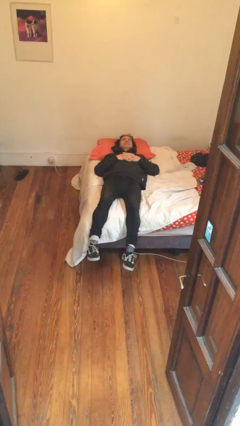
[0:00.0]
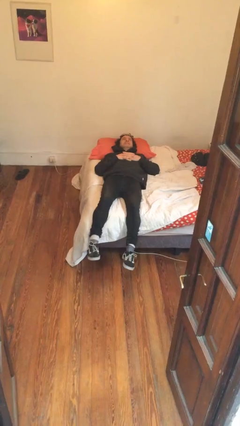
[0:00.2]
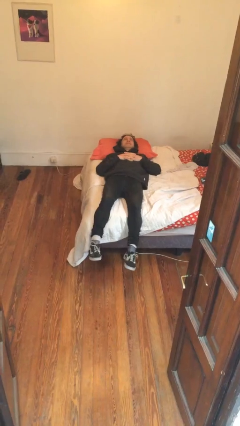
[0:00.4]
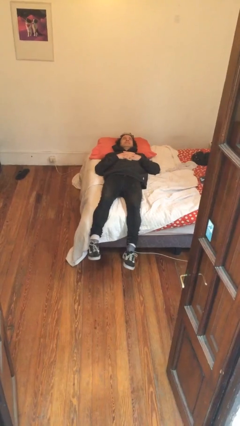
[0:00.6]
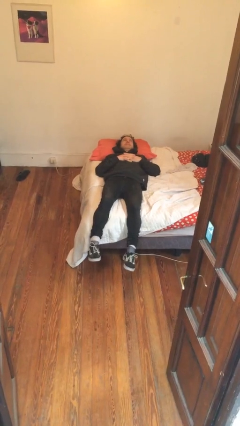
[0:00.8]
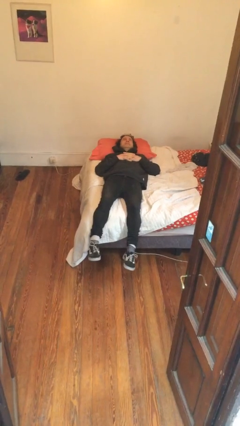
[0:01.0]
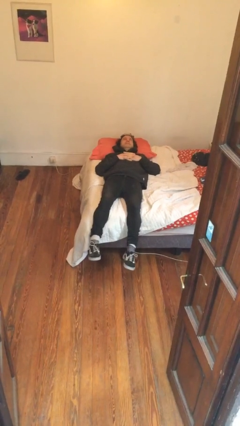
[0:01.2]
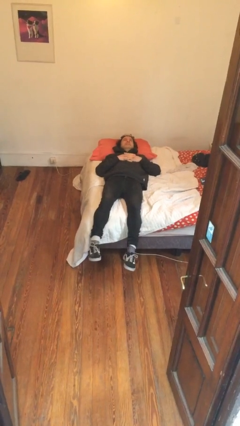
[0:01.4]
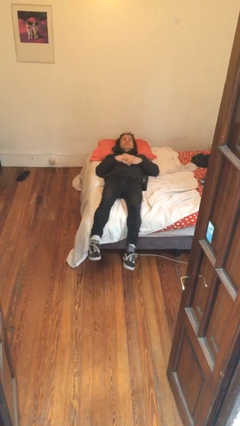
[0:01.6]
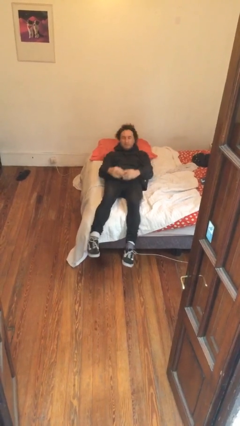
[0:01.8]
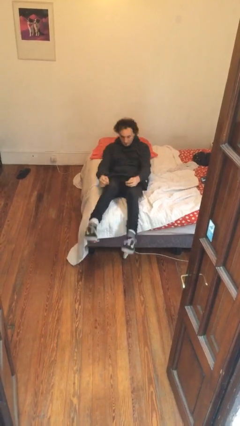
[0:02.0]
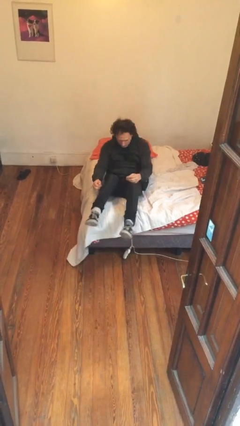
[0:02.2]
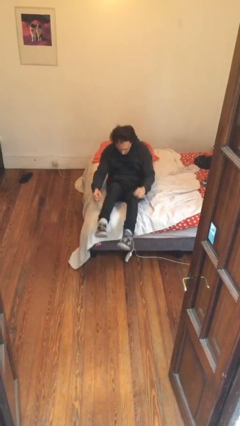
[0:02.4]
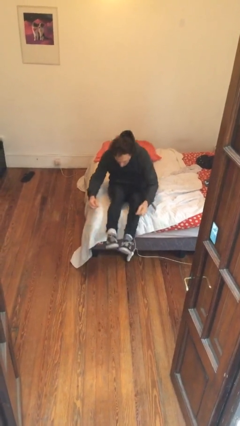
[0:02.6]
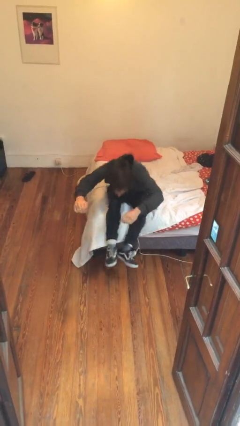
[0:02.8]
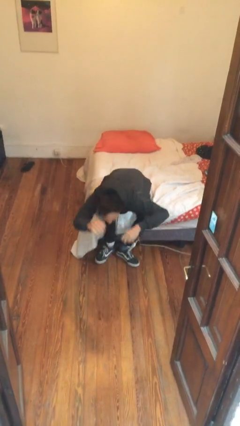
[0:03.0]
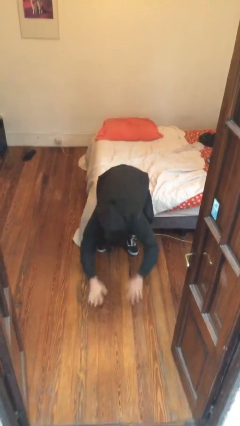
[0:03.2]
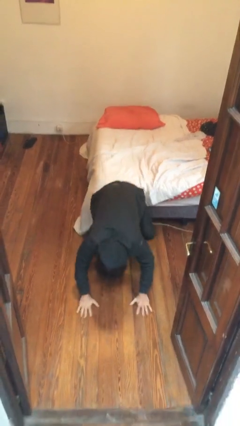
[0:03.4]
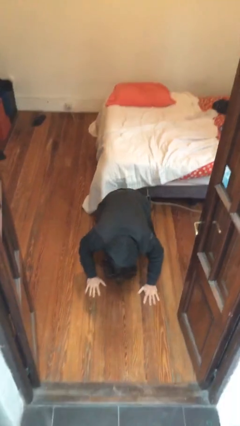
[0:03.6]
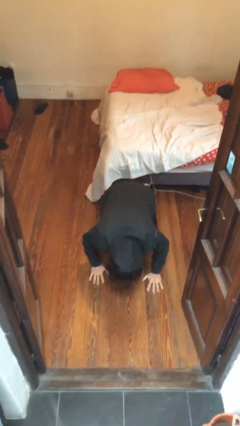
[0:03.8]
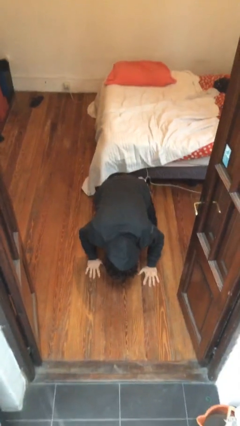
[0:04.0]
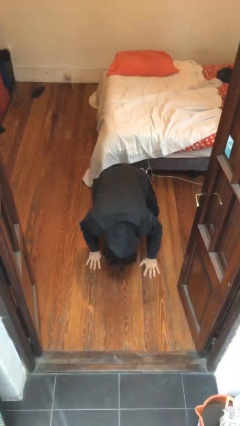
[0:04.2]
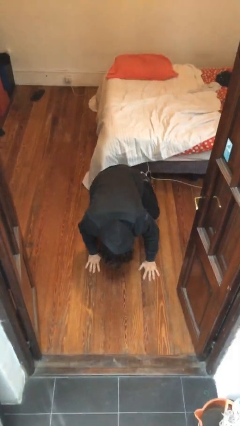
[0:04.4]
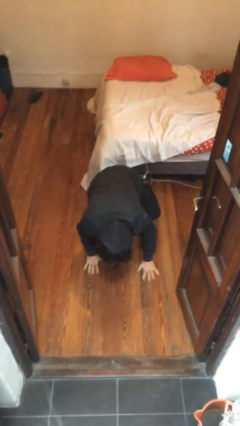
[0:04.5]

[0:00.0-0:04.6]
person falls from bed

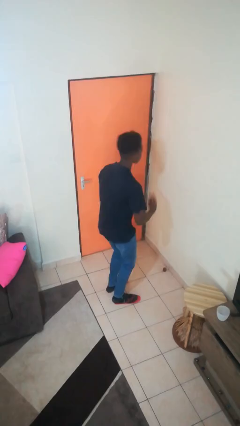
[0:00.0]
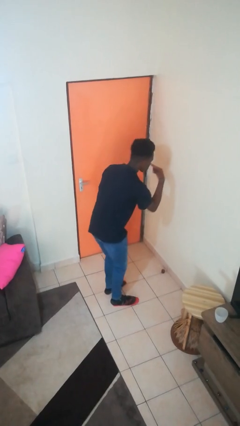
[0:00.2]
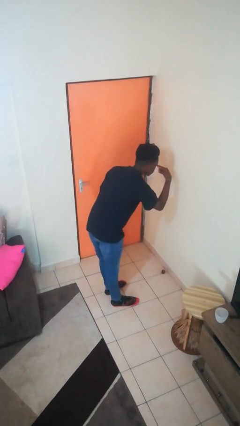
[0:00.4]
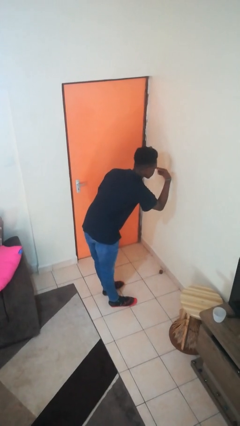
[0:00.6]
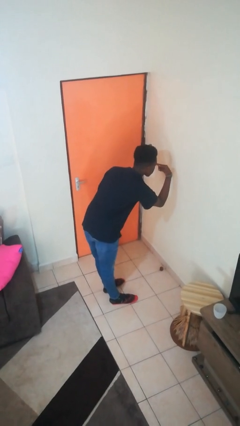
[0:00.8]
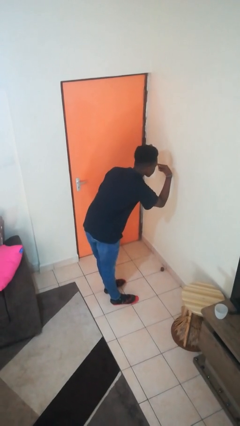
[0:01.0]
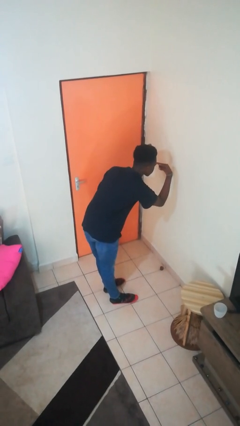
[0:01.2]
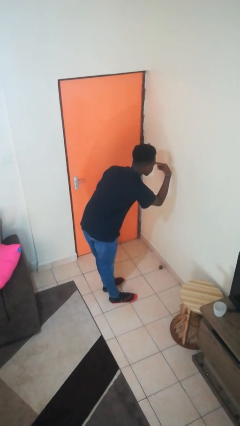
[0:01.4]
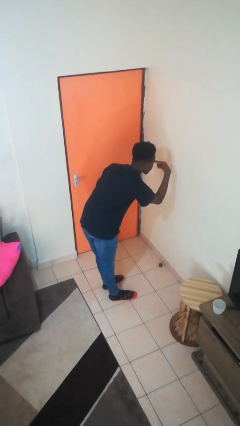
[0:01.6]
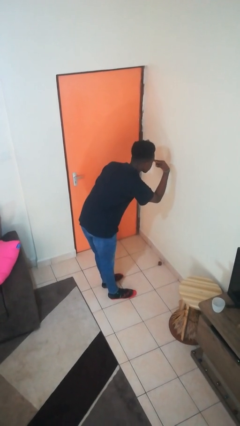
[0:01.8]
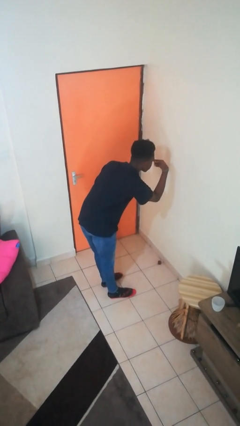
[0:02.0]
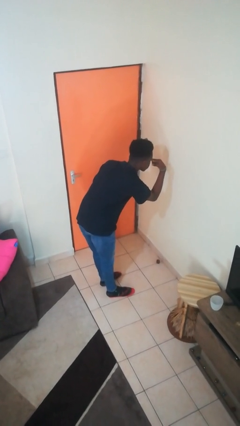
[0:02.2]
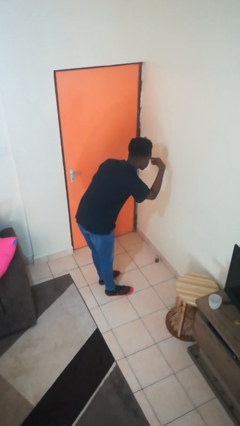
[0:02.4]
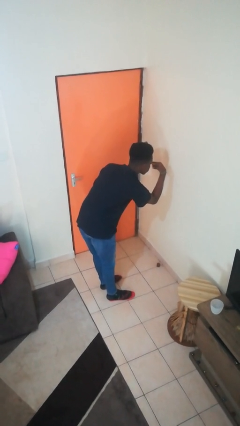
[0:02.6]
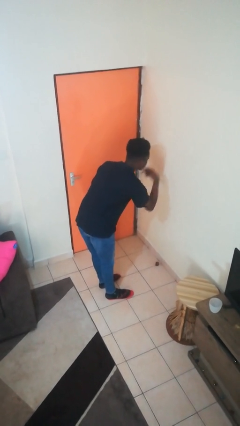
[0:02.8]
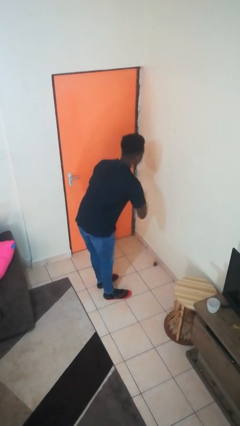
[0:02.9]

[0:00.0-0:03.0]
person gestures watch closely

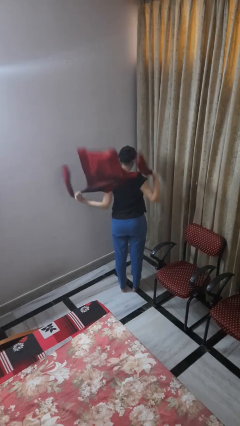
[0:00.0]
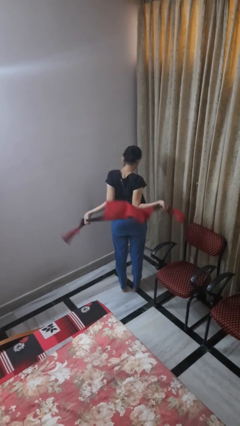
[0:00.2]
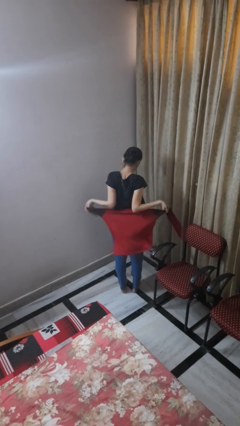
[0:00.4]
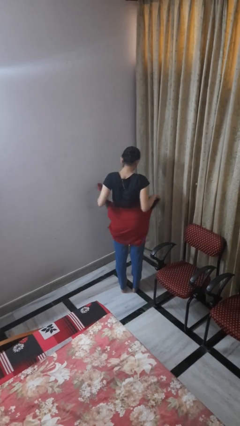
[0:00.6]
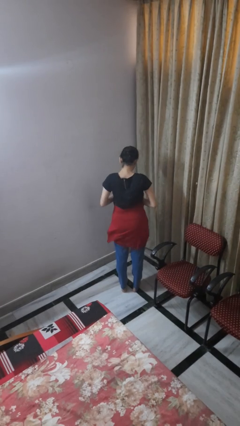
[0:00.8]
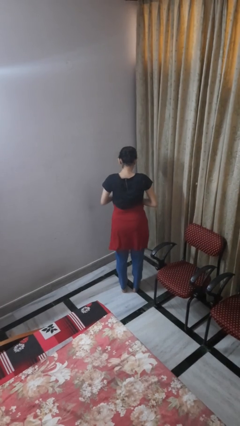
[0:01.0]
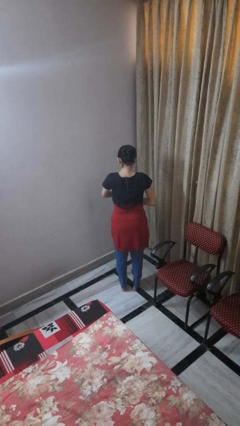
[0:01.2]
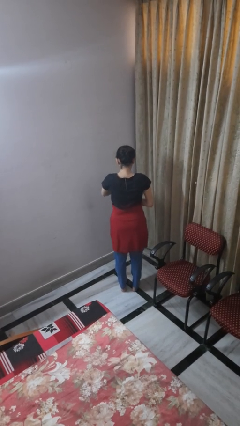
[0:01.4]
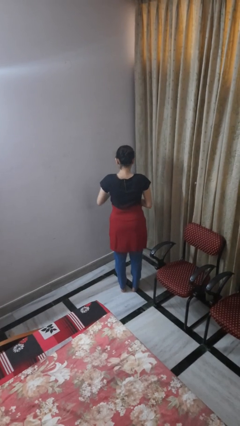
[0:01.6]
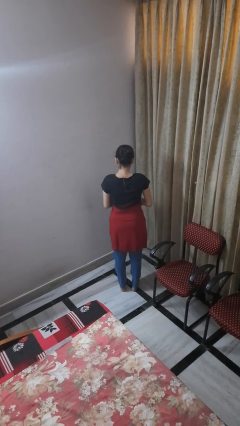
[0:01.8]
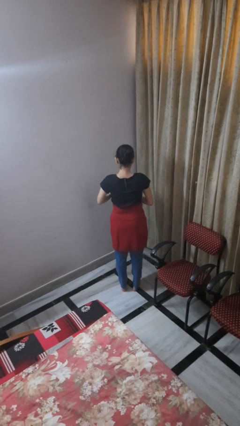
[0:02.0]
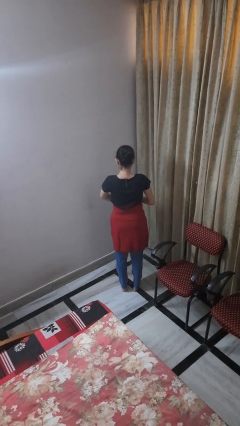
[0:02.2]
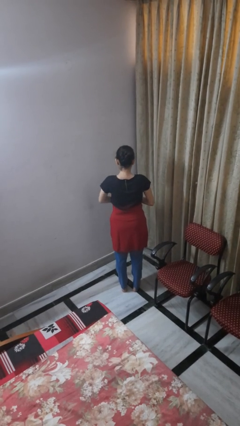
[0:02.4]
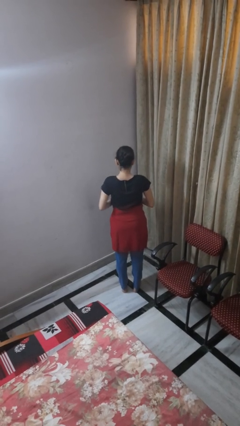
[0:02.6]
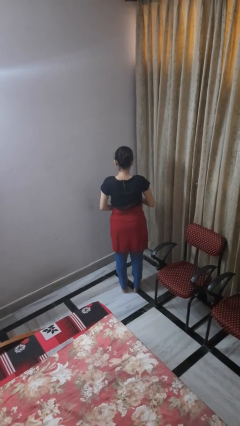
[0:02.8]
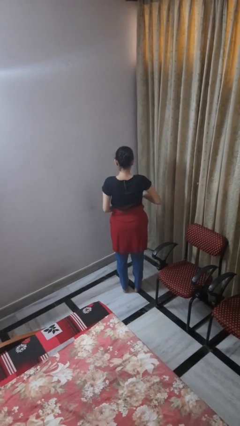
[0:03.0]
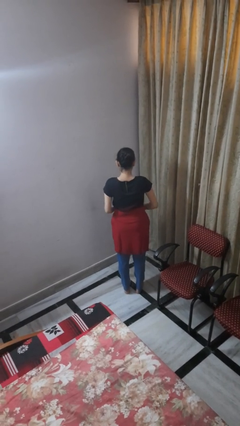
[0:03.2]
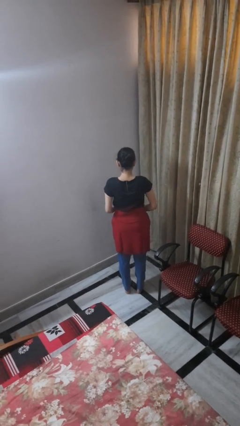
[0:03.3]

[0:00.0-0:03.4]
person ties jacket around waist

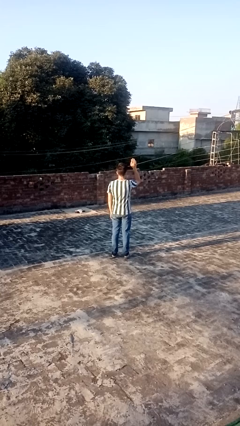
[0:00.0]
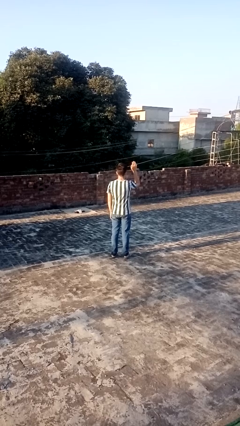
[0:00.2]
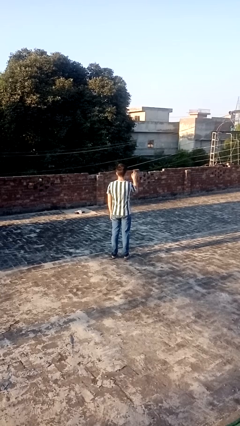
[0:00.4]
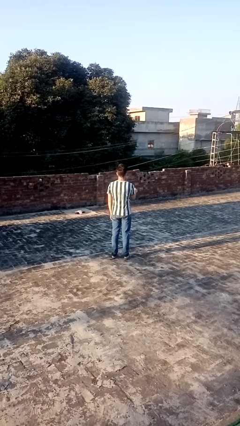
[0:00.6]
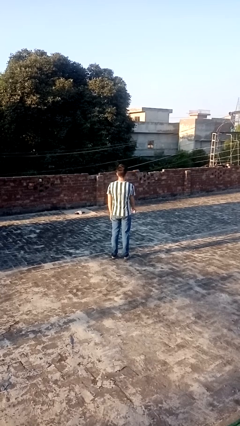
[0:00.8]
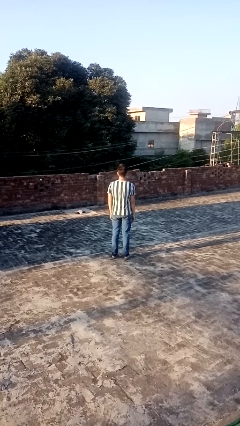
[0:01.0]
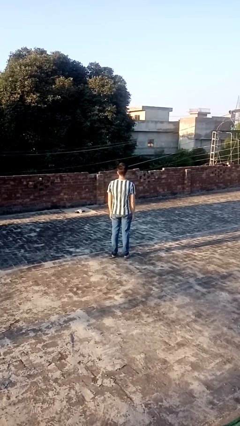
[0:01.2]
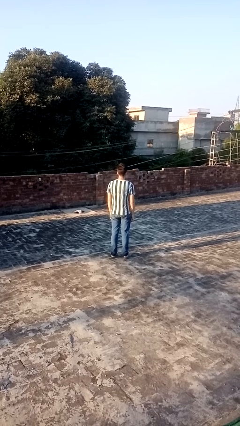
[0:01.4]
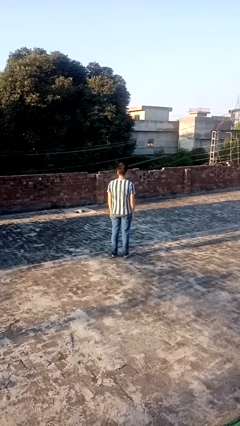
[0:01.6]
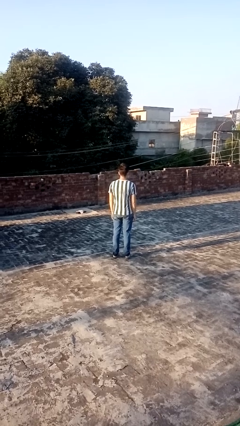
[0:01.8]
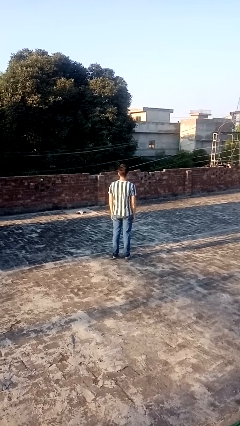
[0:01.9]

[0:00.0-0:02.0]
person gestures lower hand

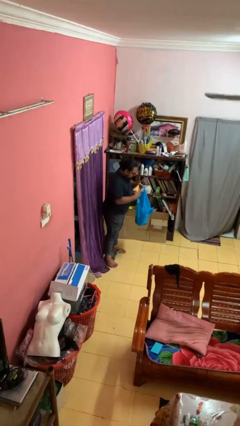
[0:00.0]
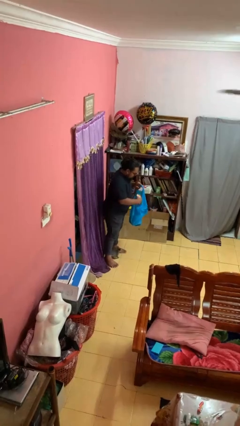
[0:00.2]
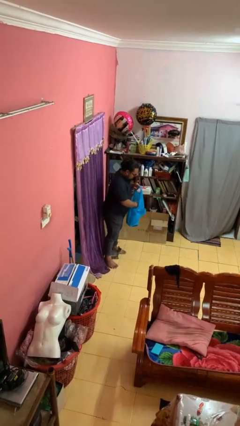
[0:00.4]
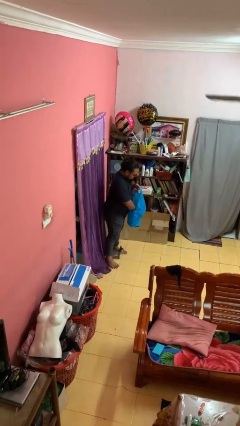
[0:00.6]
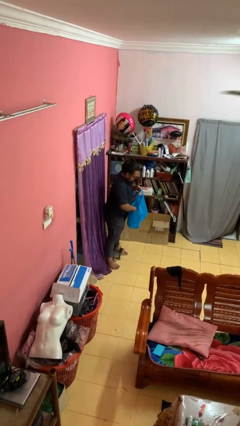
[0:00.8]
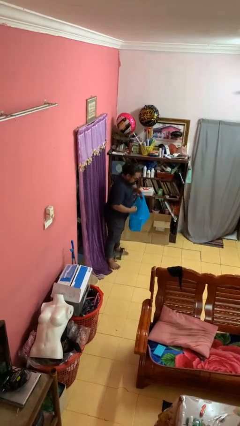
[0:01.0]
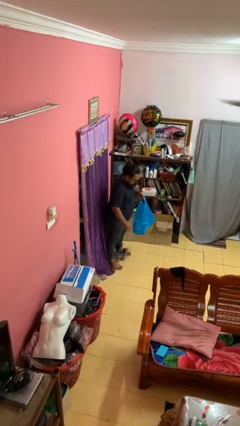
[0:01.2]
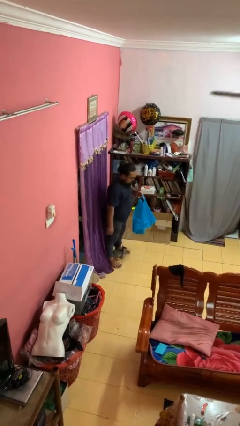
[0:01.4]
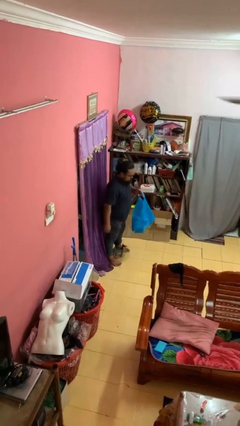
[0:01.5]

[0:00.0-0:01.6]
person puts object into bag

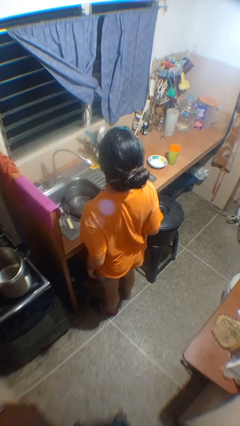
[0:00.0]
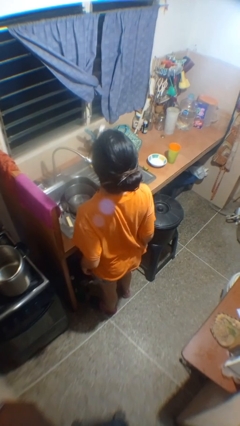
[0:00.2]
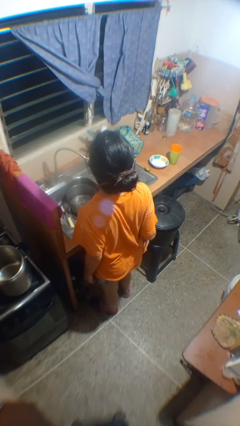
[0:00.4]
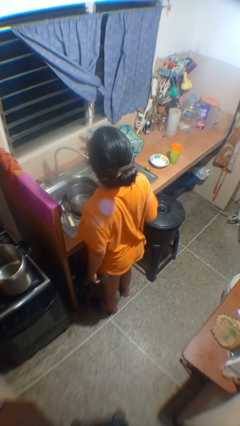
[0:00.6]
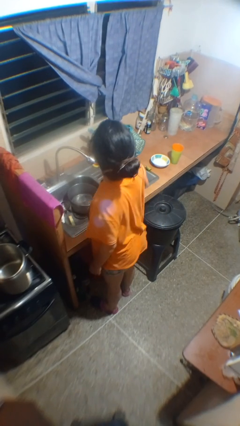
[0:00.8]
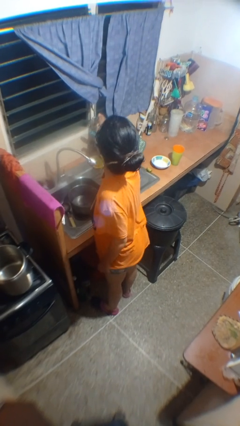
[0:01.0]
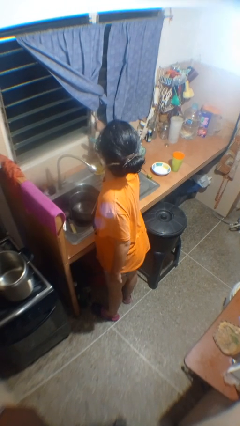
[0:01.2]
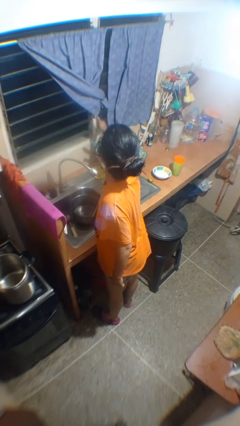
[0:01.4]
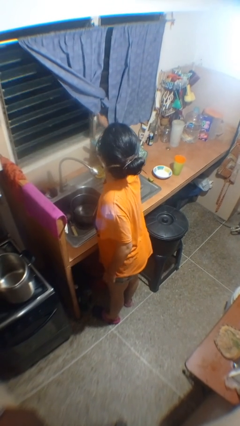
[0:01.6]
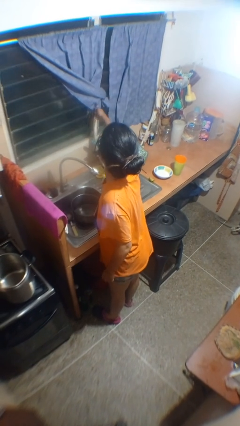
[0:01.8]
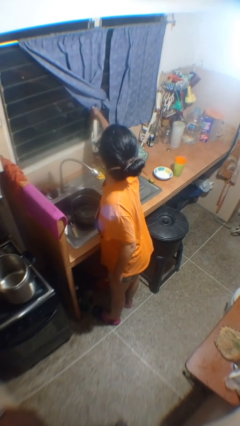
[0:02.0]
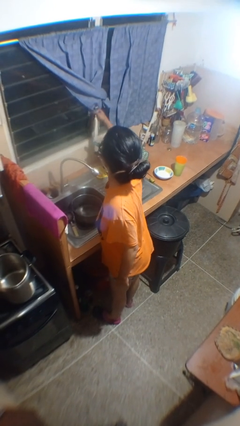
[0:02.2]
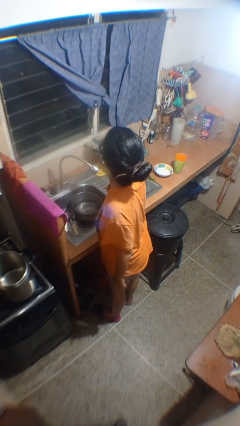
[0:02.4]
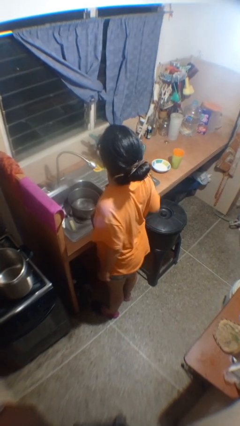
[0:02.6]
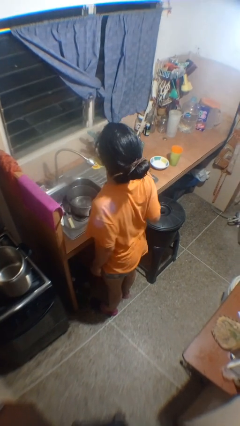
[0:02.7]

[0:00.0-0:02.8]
person closes home window

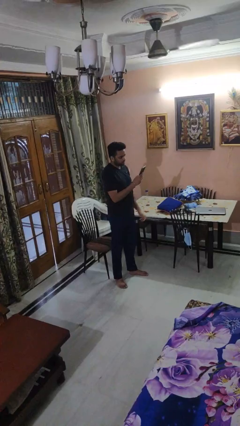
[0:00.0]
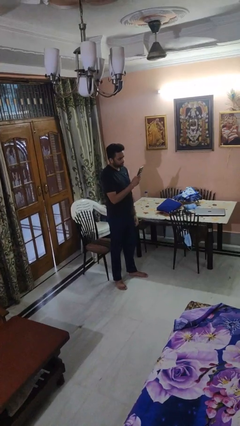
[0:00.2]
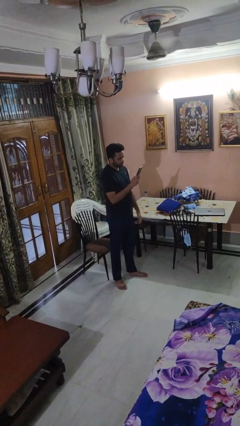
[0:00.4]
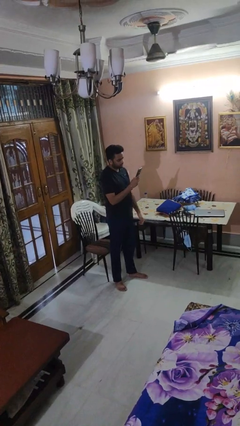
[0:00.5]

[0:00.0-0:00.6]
person takes phone from pocket
